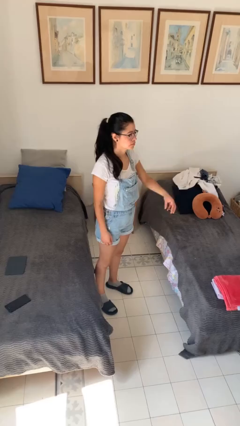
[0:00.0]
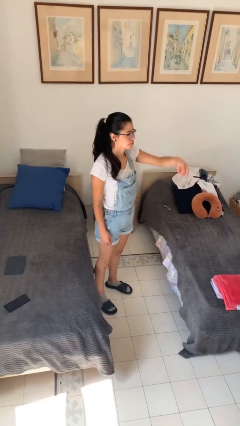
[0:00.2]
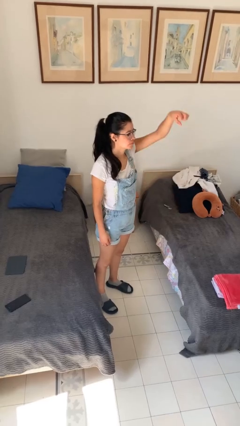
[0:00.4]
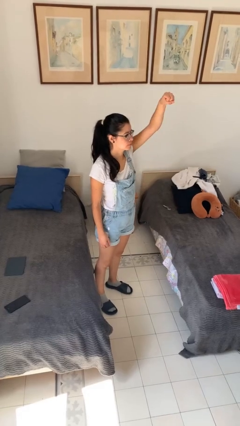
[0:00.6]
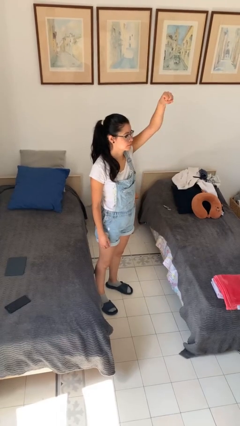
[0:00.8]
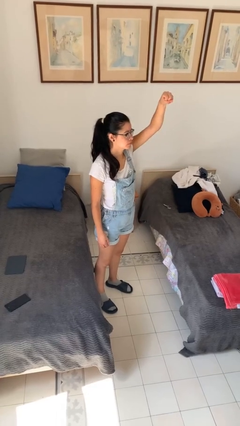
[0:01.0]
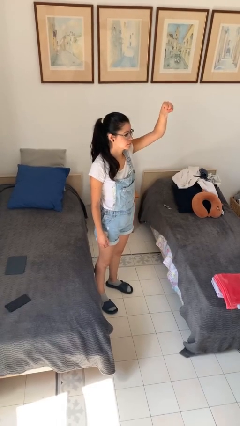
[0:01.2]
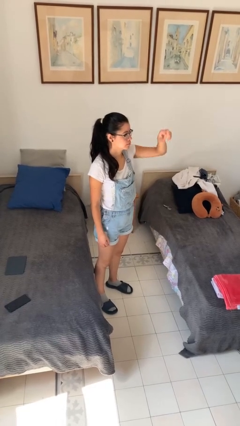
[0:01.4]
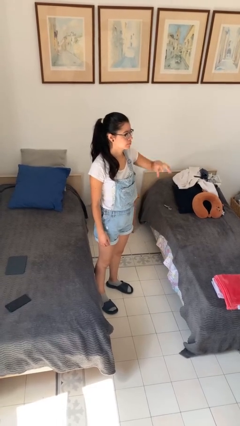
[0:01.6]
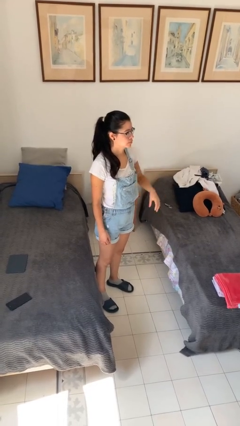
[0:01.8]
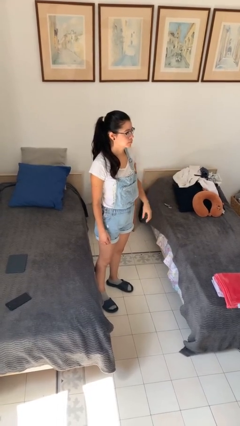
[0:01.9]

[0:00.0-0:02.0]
person gestures hang loose

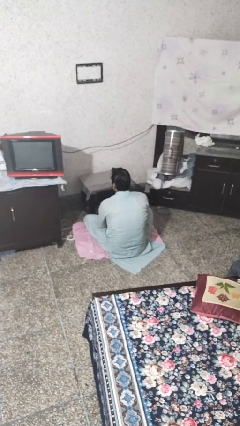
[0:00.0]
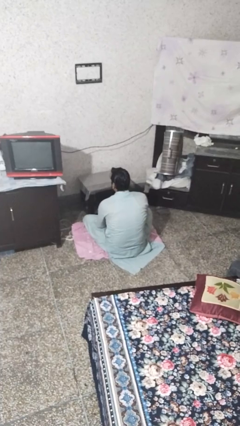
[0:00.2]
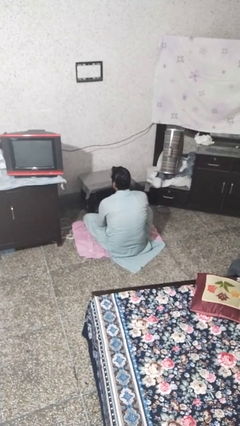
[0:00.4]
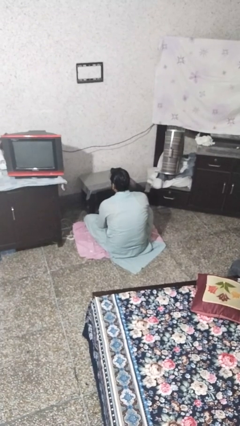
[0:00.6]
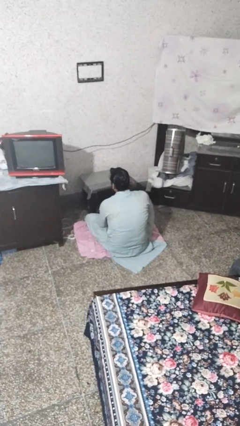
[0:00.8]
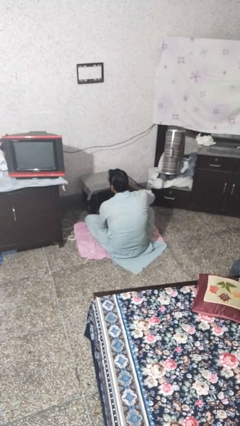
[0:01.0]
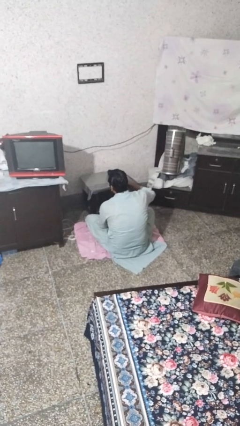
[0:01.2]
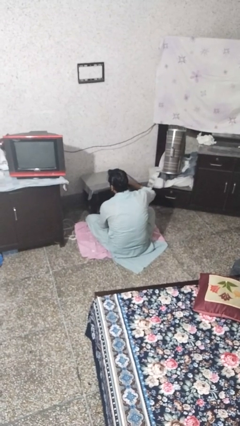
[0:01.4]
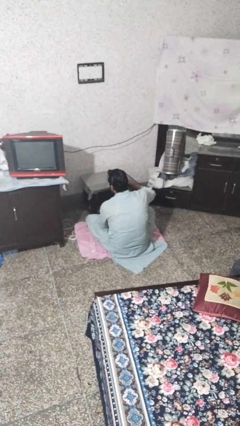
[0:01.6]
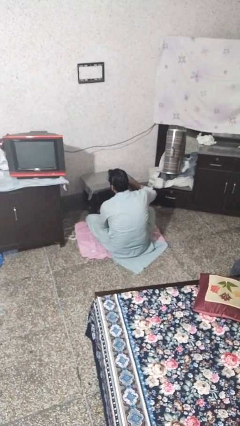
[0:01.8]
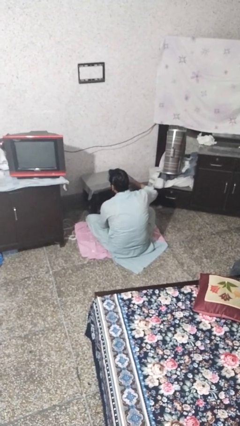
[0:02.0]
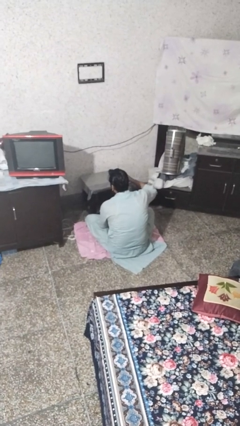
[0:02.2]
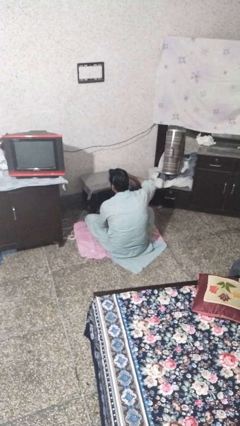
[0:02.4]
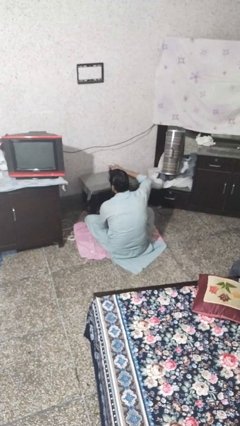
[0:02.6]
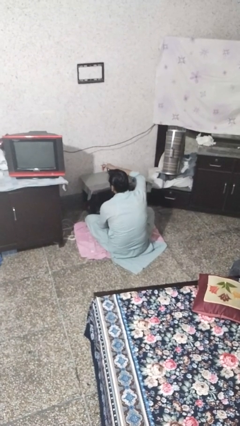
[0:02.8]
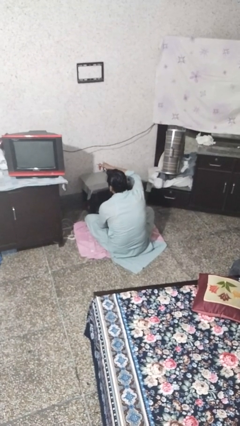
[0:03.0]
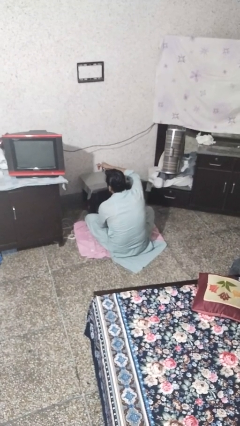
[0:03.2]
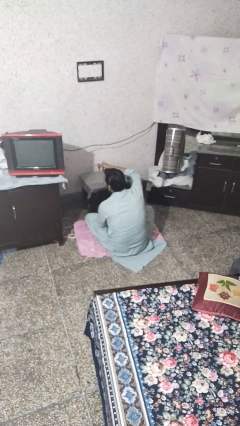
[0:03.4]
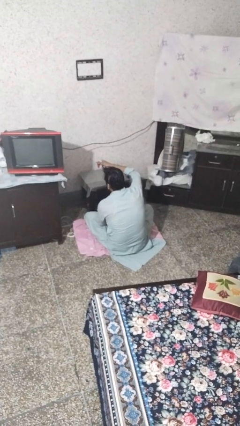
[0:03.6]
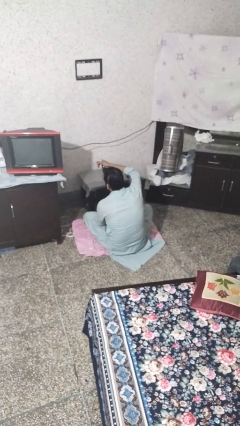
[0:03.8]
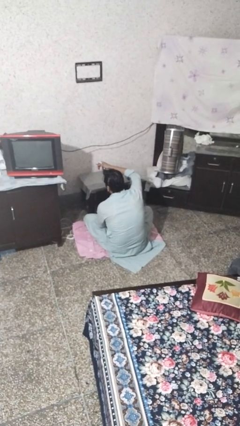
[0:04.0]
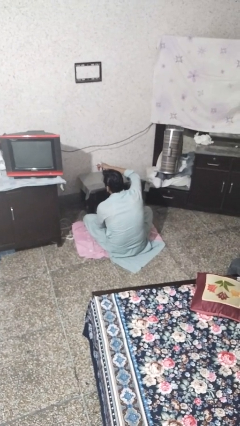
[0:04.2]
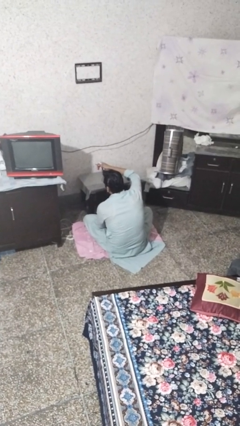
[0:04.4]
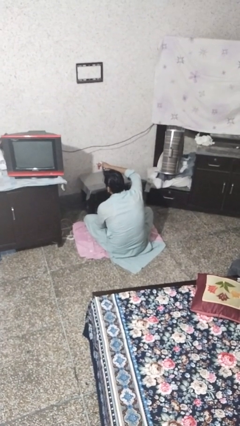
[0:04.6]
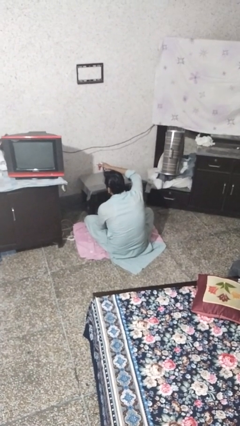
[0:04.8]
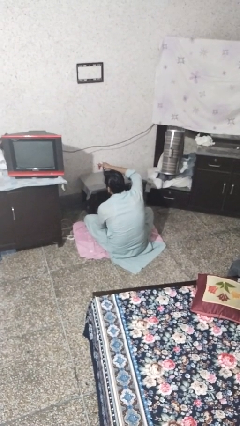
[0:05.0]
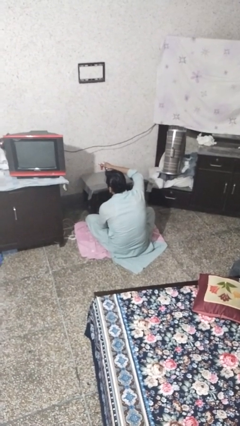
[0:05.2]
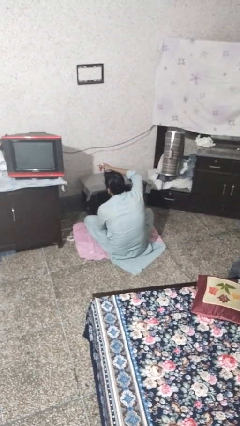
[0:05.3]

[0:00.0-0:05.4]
person sprays from bottle

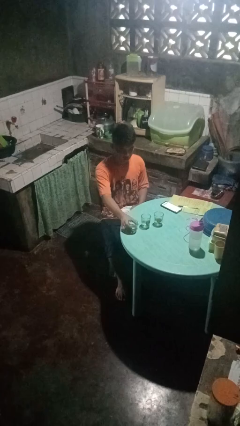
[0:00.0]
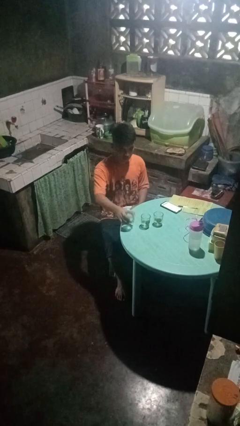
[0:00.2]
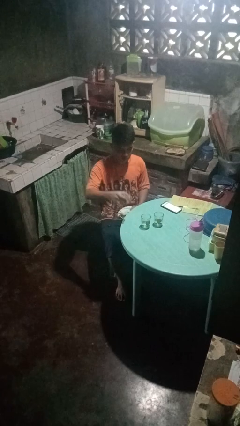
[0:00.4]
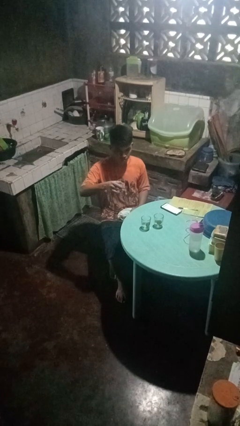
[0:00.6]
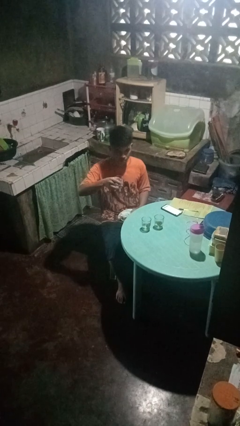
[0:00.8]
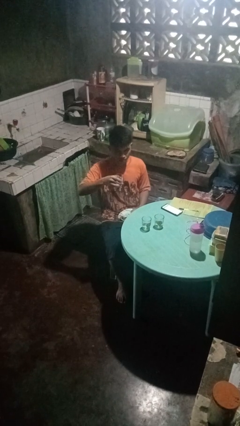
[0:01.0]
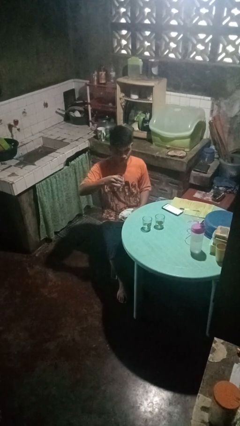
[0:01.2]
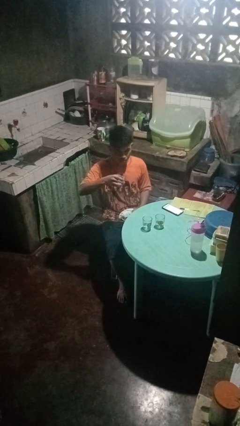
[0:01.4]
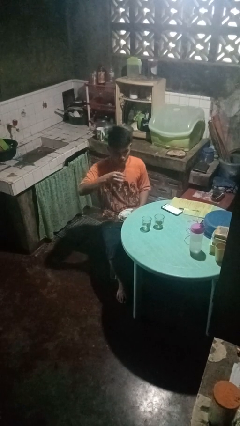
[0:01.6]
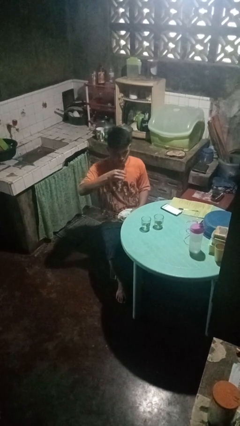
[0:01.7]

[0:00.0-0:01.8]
person picks up object from table

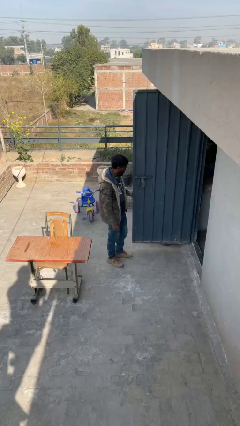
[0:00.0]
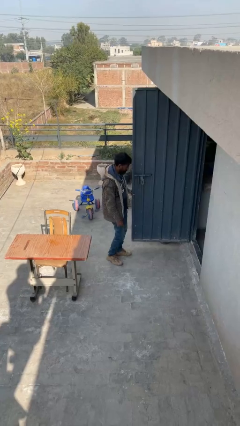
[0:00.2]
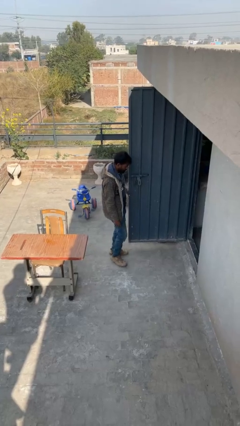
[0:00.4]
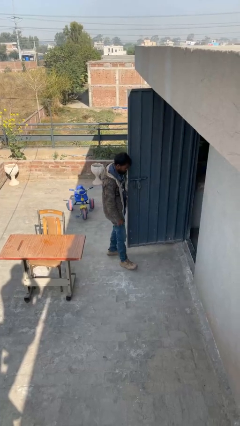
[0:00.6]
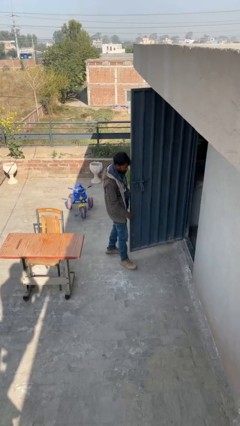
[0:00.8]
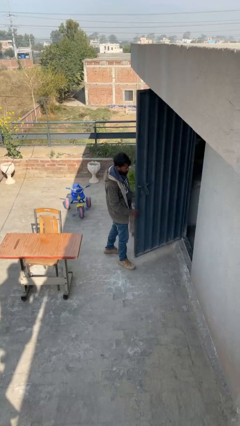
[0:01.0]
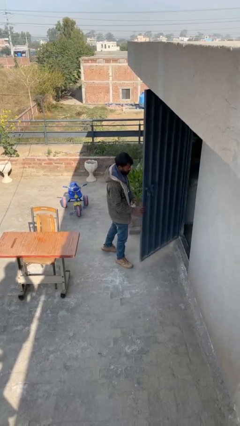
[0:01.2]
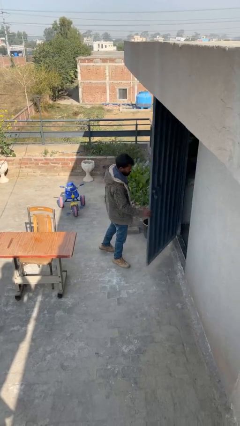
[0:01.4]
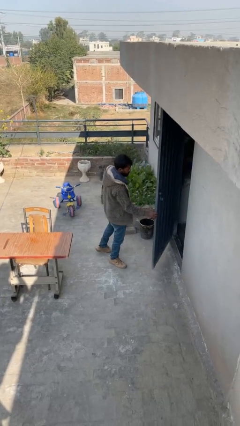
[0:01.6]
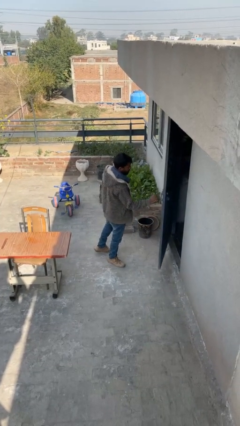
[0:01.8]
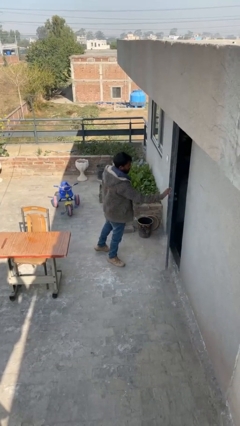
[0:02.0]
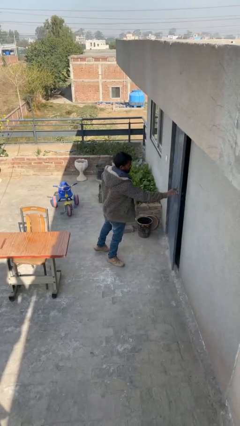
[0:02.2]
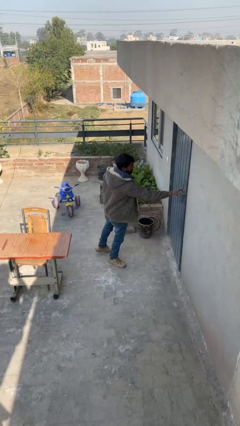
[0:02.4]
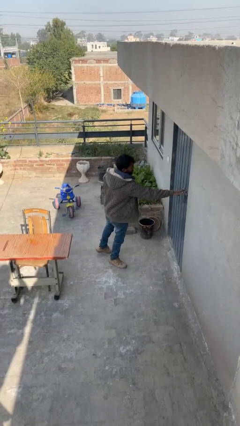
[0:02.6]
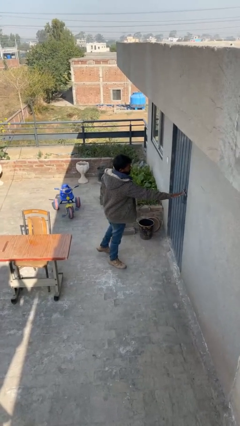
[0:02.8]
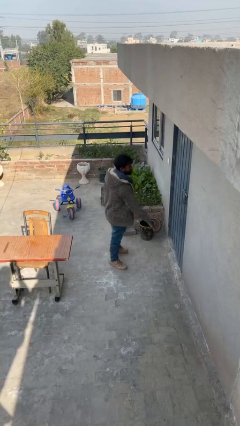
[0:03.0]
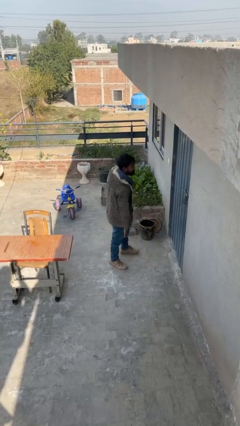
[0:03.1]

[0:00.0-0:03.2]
person closes facility door

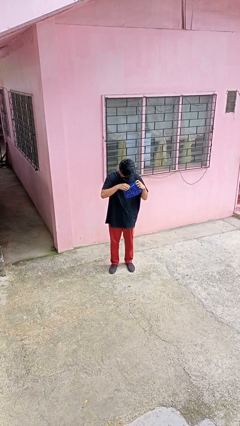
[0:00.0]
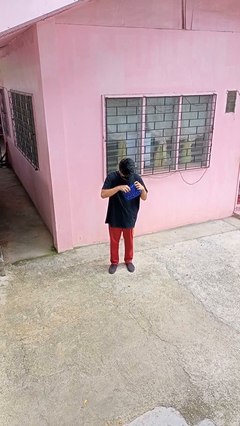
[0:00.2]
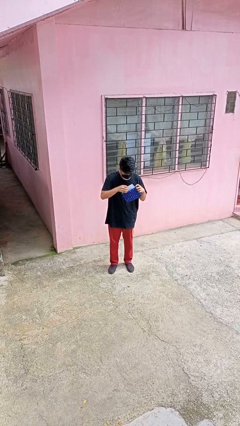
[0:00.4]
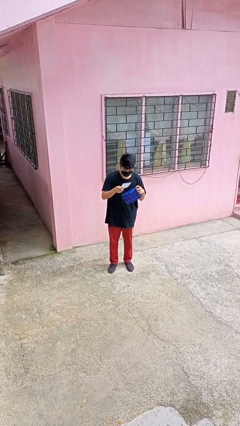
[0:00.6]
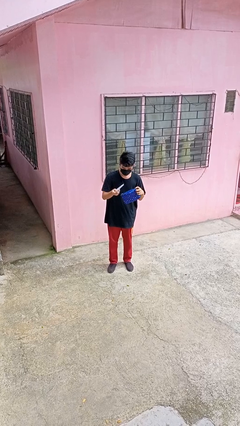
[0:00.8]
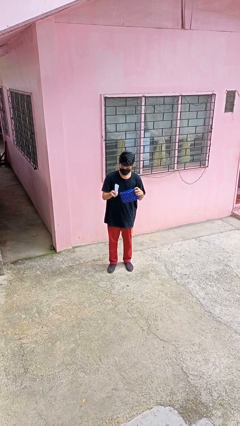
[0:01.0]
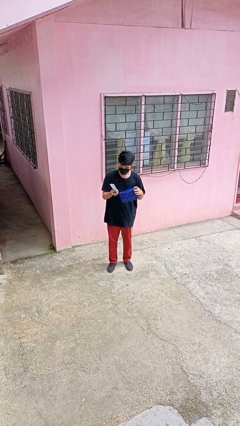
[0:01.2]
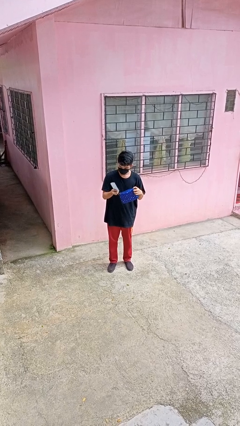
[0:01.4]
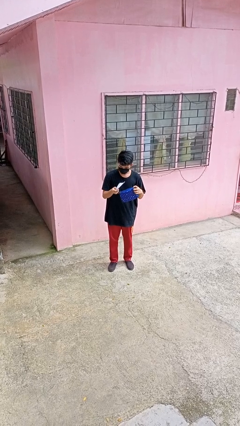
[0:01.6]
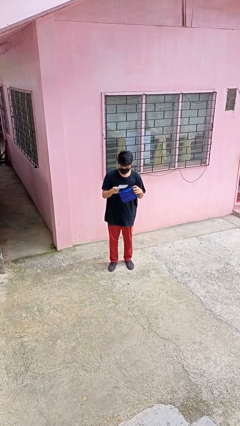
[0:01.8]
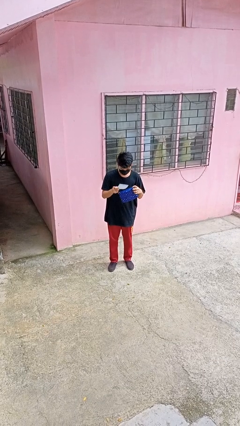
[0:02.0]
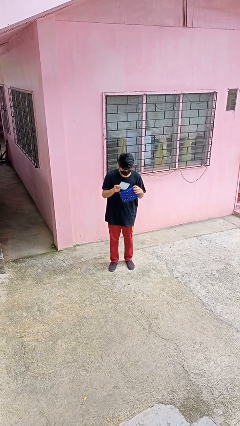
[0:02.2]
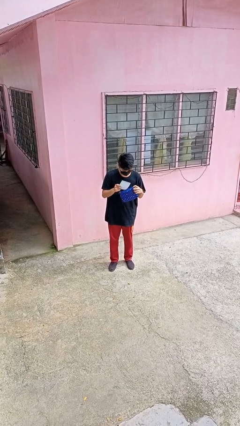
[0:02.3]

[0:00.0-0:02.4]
person takes object from purse

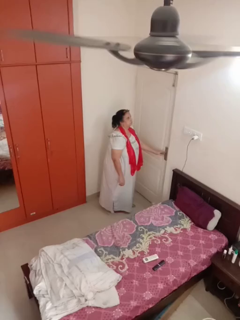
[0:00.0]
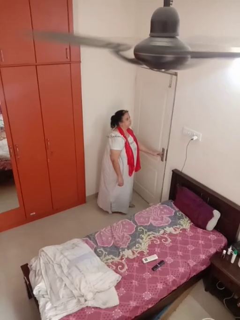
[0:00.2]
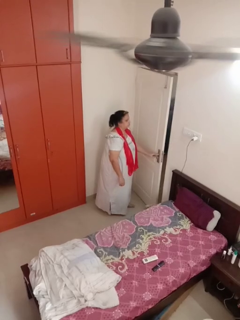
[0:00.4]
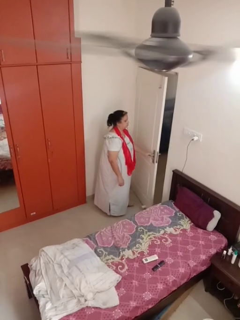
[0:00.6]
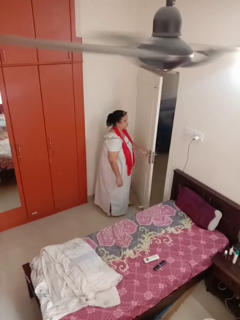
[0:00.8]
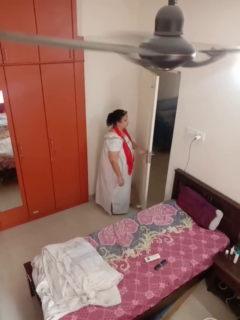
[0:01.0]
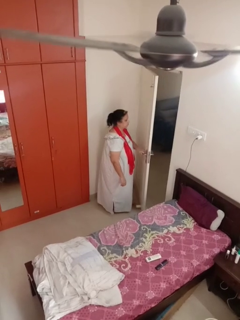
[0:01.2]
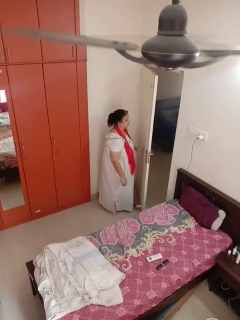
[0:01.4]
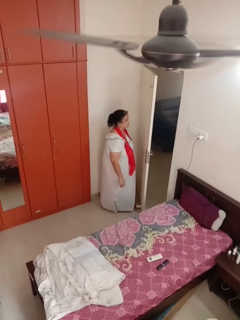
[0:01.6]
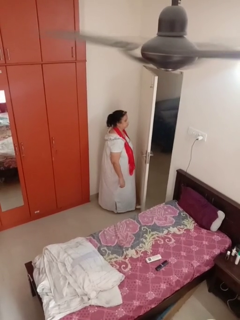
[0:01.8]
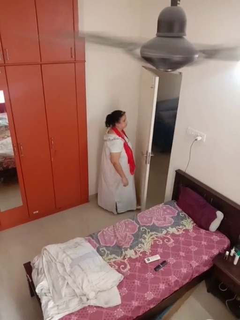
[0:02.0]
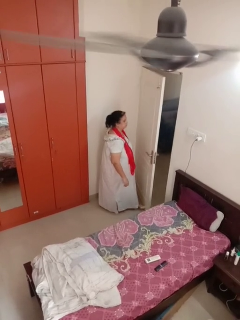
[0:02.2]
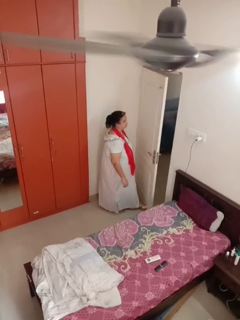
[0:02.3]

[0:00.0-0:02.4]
person opens facility door

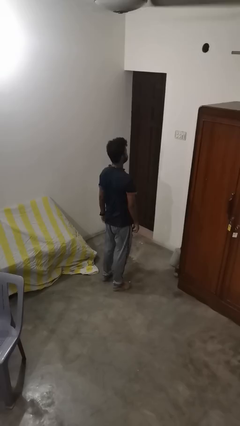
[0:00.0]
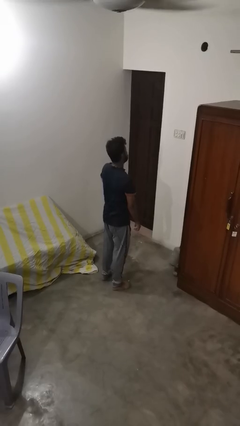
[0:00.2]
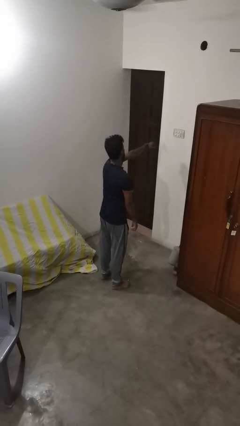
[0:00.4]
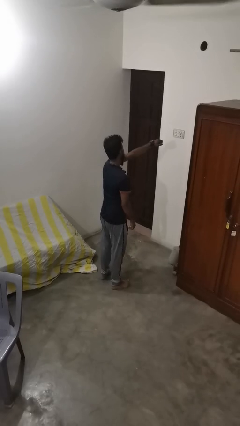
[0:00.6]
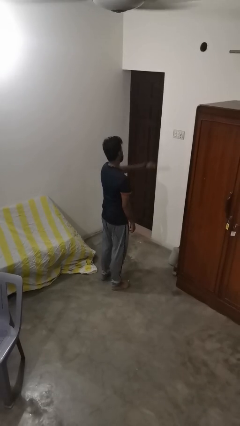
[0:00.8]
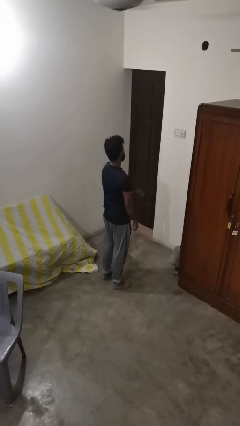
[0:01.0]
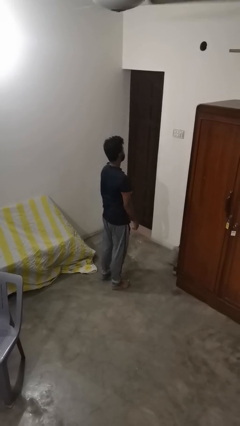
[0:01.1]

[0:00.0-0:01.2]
person punches
